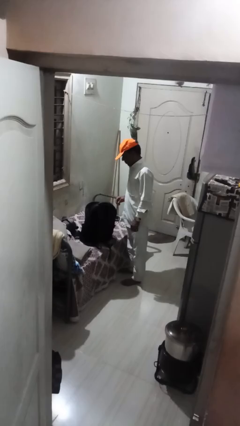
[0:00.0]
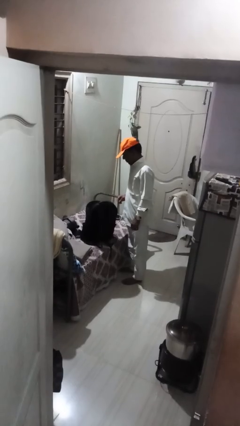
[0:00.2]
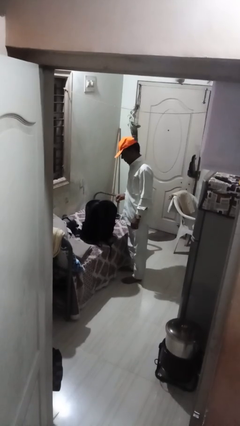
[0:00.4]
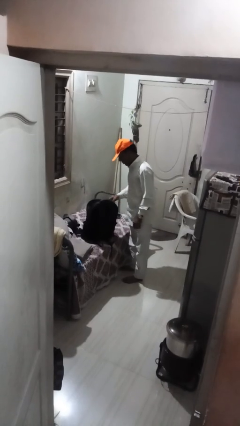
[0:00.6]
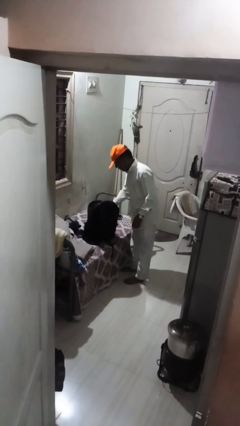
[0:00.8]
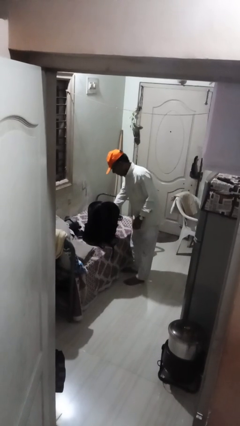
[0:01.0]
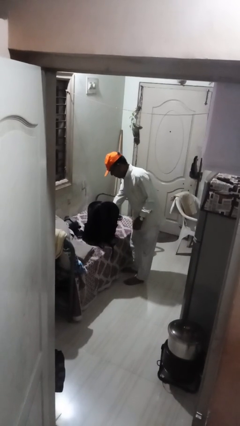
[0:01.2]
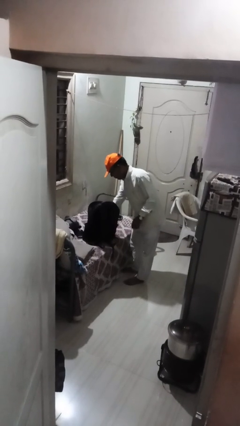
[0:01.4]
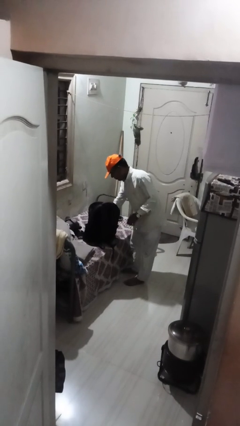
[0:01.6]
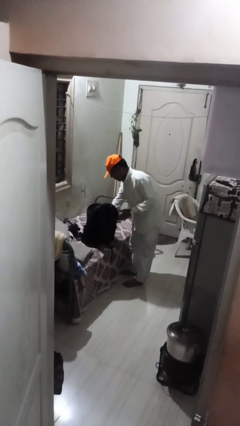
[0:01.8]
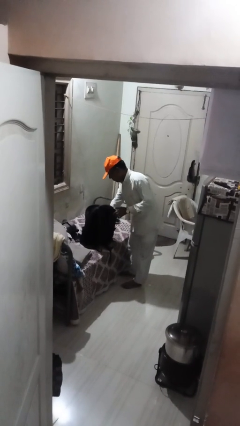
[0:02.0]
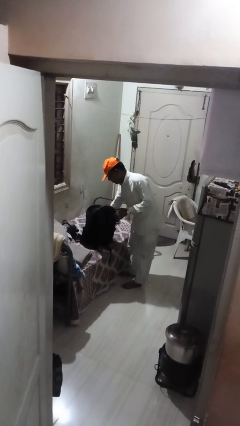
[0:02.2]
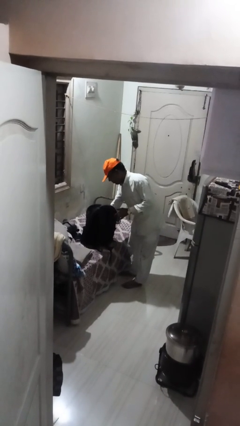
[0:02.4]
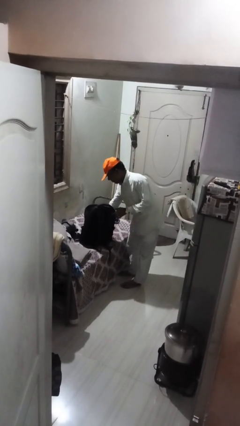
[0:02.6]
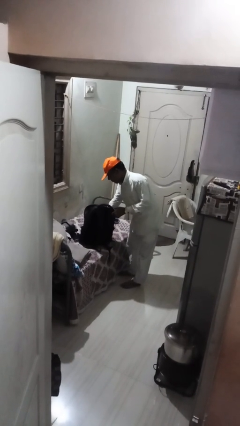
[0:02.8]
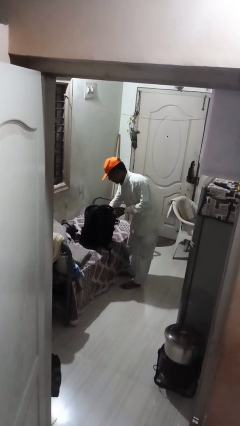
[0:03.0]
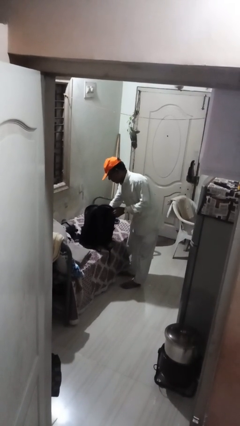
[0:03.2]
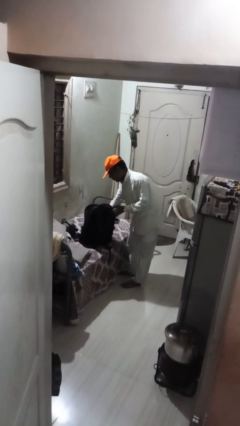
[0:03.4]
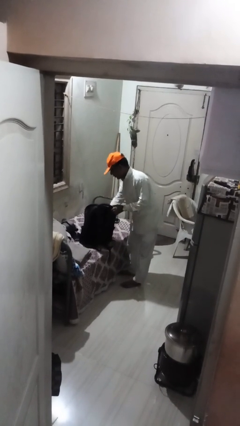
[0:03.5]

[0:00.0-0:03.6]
person searches in backpack

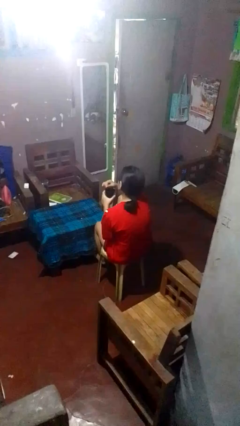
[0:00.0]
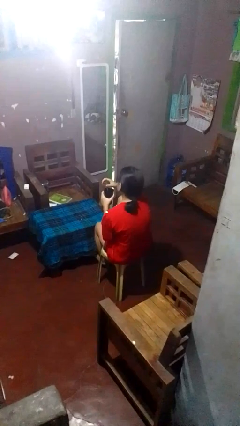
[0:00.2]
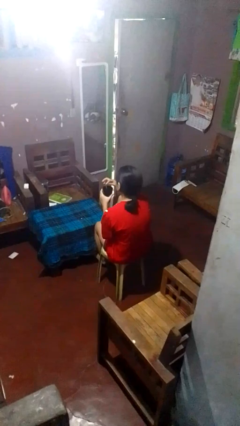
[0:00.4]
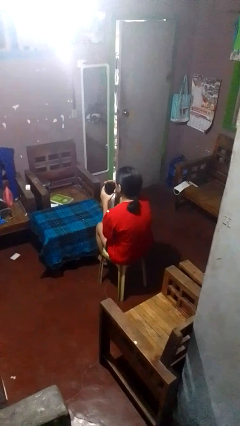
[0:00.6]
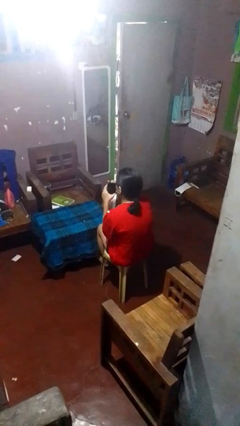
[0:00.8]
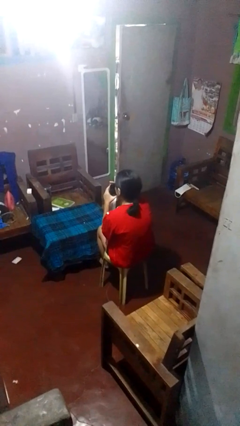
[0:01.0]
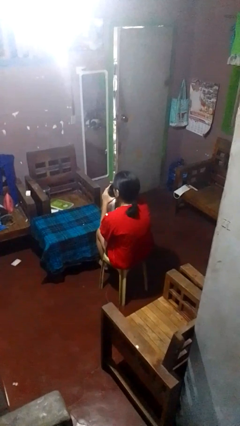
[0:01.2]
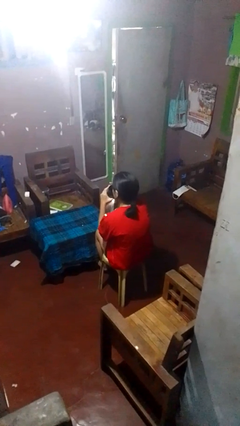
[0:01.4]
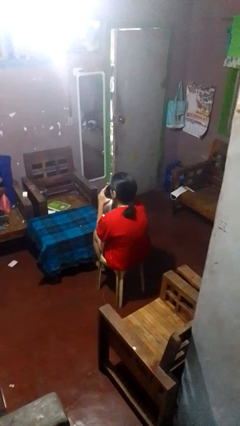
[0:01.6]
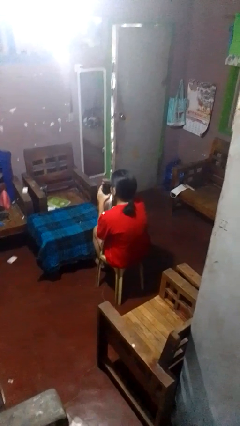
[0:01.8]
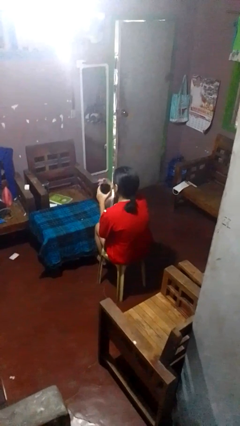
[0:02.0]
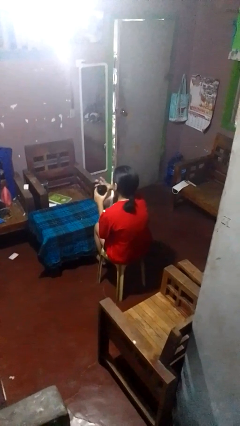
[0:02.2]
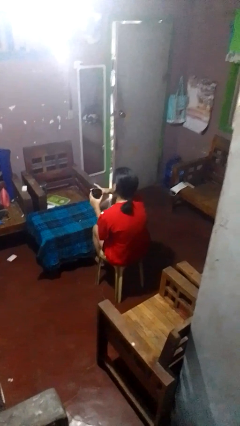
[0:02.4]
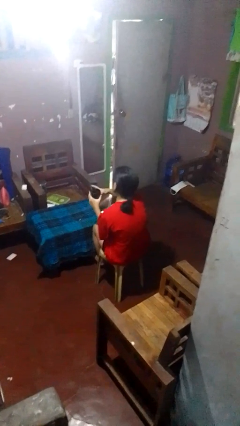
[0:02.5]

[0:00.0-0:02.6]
person drinks from mug

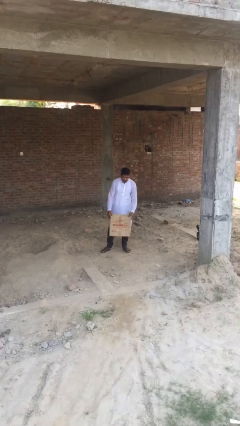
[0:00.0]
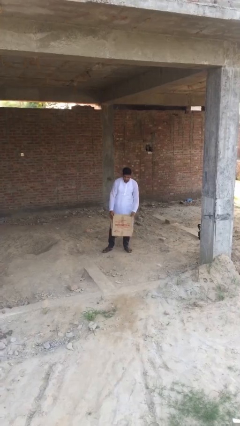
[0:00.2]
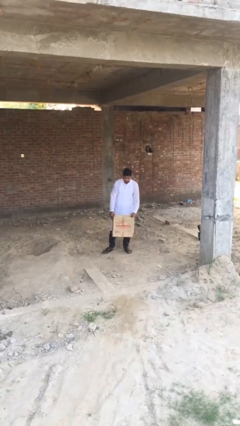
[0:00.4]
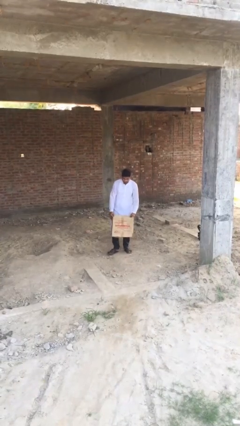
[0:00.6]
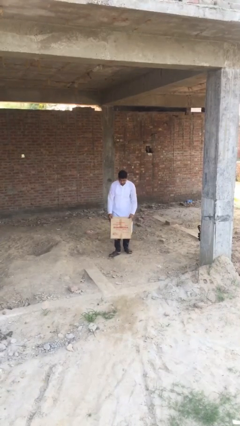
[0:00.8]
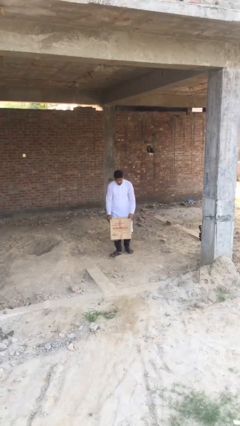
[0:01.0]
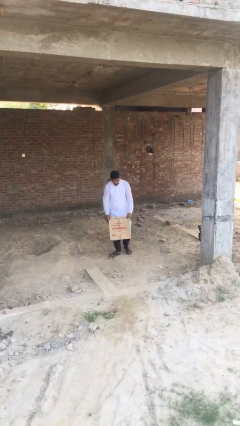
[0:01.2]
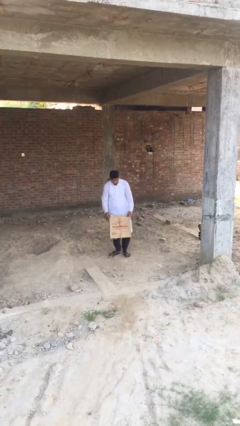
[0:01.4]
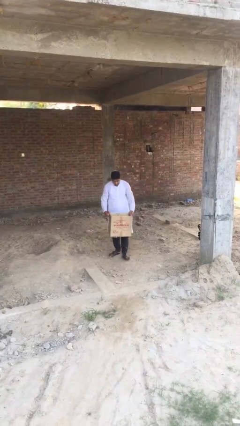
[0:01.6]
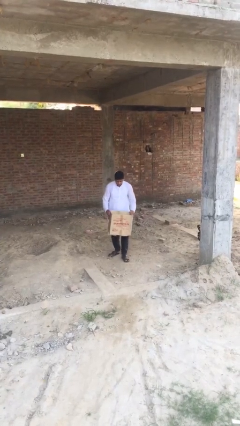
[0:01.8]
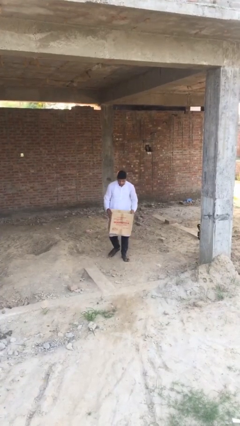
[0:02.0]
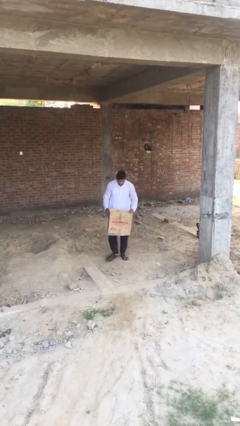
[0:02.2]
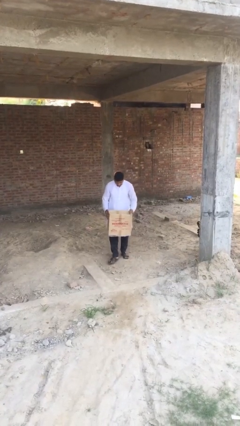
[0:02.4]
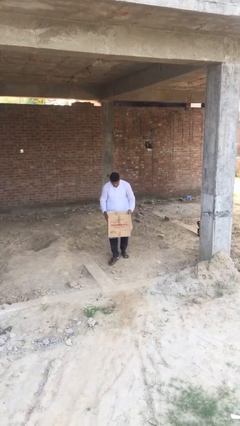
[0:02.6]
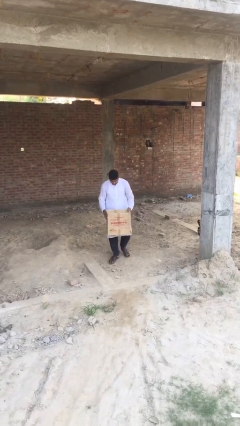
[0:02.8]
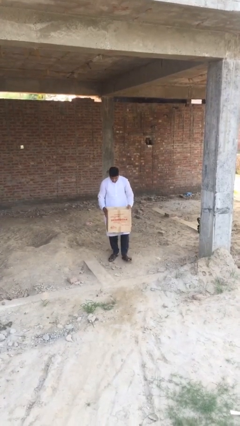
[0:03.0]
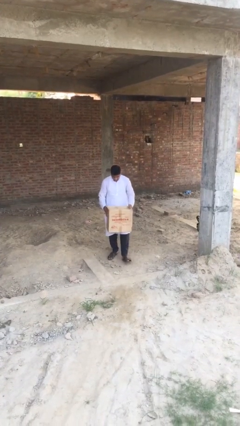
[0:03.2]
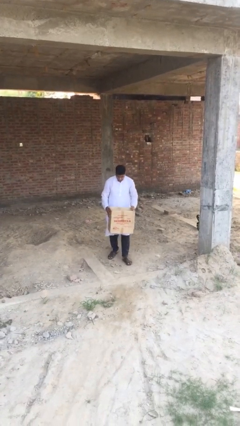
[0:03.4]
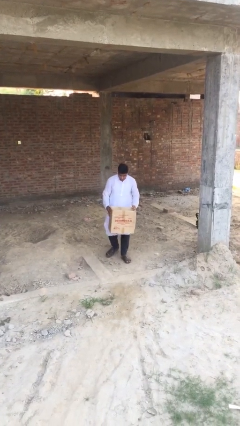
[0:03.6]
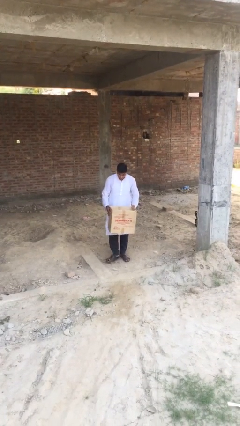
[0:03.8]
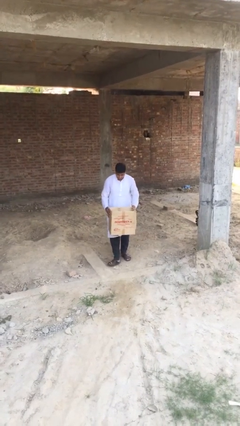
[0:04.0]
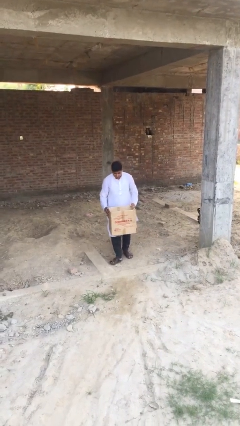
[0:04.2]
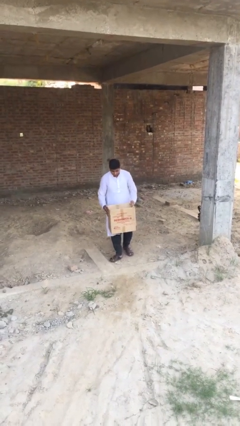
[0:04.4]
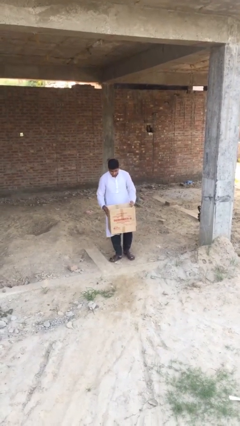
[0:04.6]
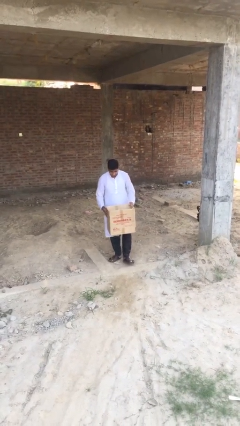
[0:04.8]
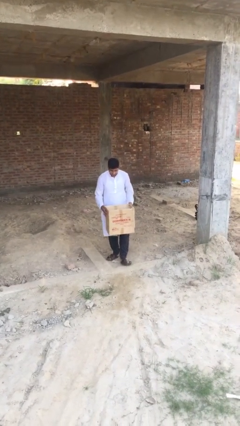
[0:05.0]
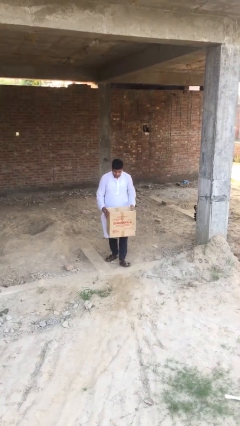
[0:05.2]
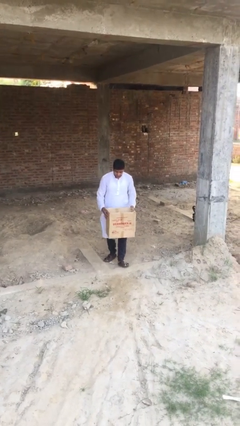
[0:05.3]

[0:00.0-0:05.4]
person carries heavy object

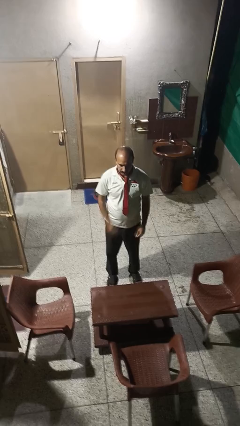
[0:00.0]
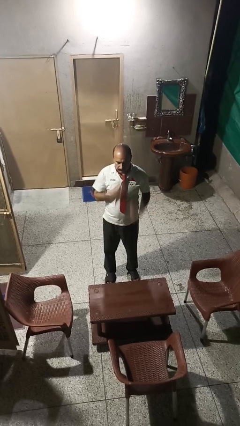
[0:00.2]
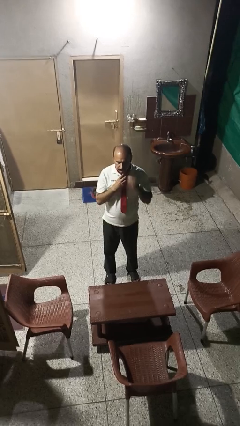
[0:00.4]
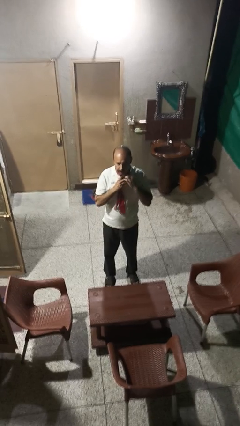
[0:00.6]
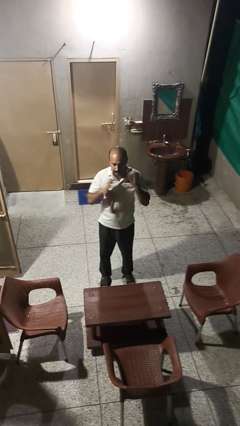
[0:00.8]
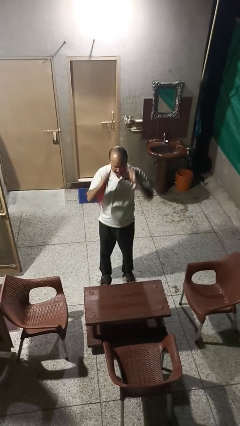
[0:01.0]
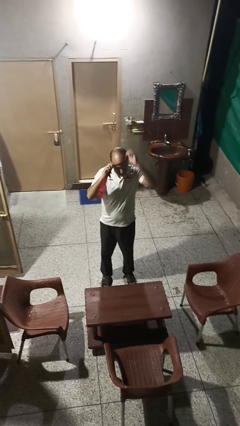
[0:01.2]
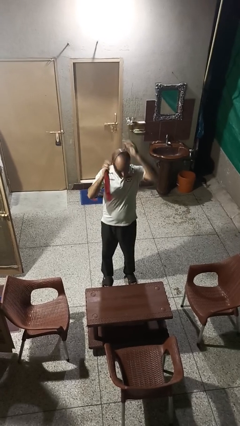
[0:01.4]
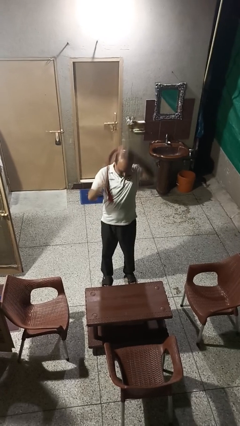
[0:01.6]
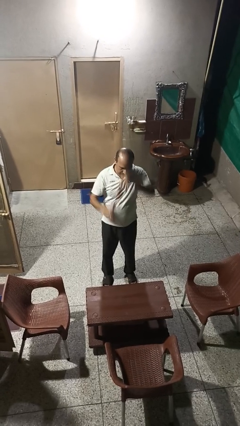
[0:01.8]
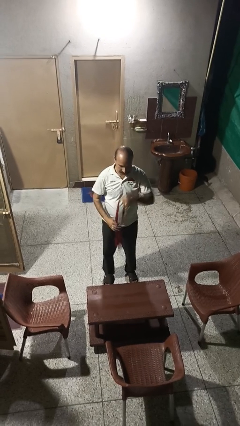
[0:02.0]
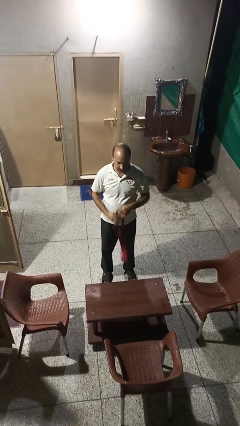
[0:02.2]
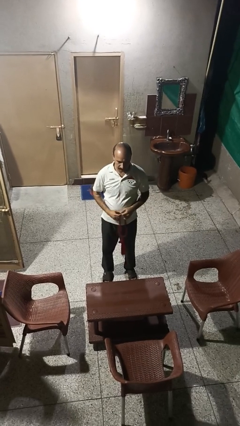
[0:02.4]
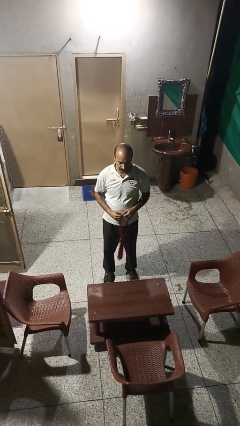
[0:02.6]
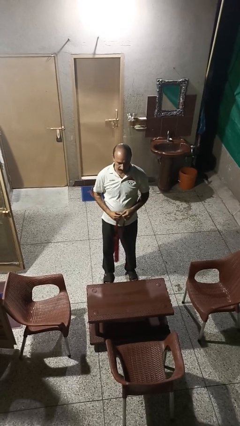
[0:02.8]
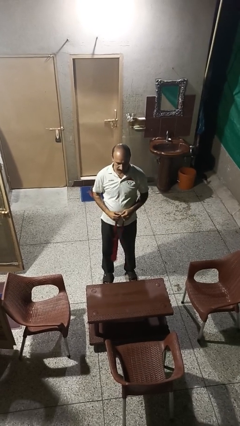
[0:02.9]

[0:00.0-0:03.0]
person takes off necktie

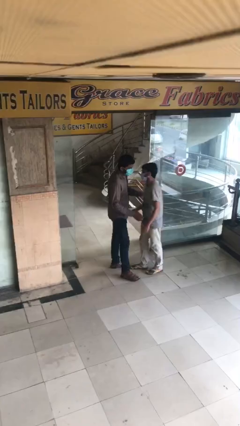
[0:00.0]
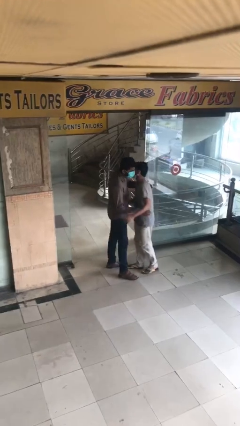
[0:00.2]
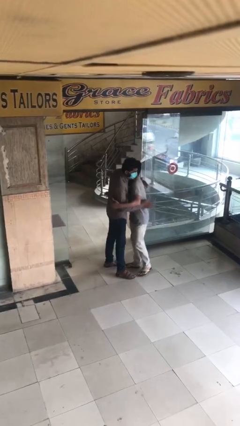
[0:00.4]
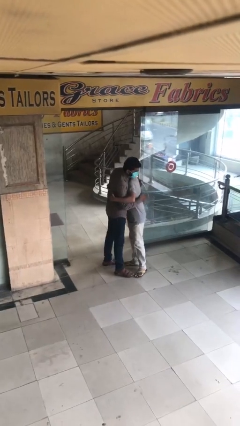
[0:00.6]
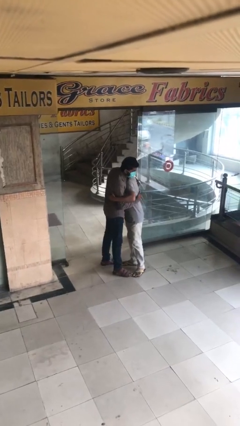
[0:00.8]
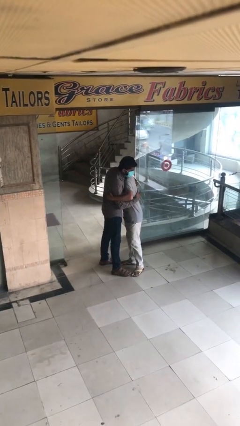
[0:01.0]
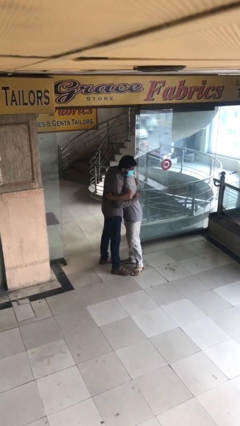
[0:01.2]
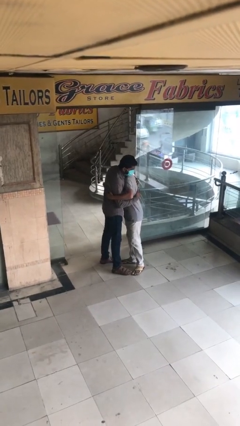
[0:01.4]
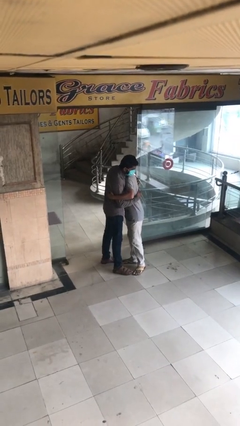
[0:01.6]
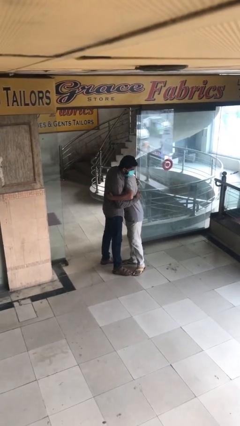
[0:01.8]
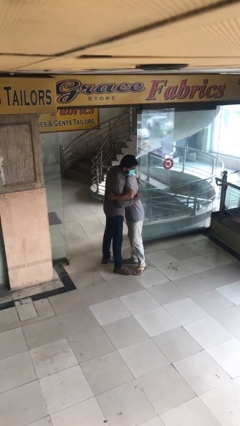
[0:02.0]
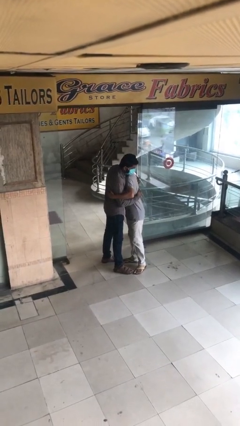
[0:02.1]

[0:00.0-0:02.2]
person embraces person

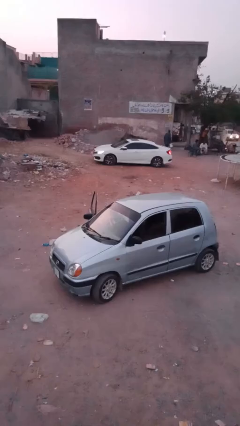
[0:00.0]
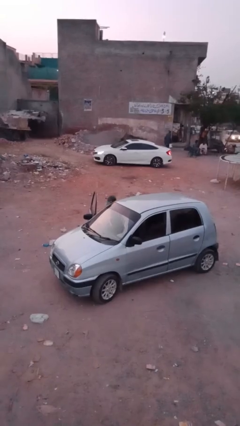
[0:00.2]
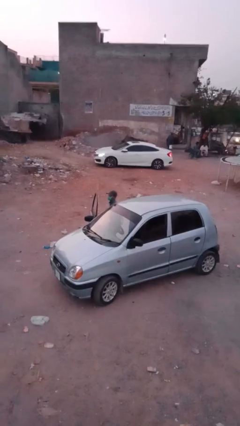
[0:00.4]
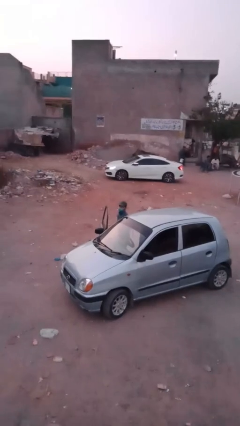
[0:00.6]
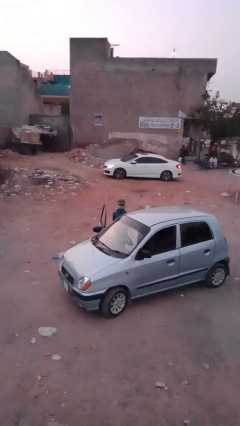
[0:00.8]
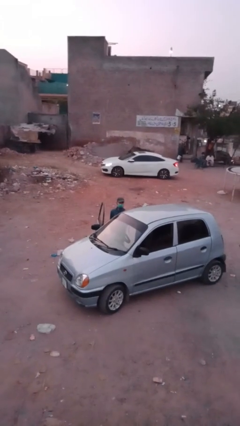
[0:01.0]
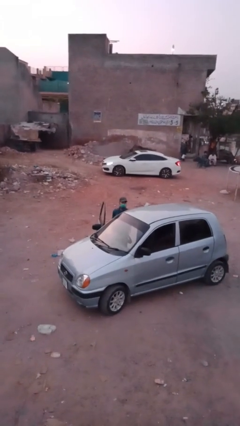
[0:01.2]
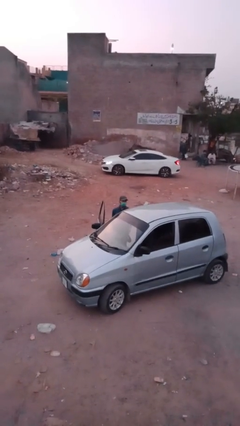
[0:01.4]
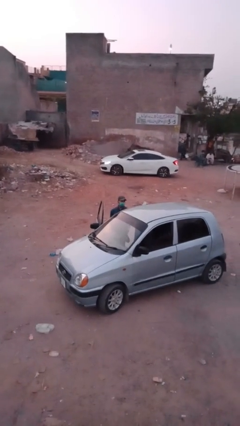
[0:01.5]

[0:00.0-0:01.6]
person exits car
